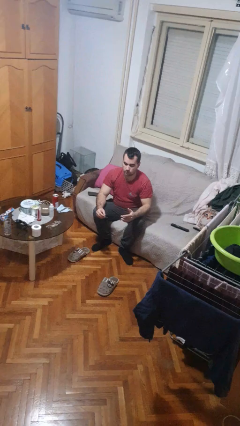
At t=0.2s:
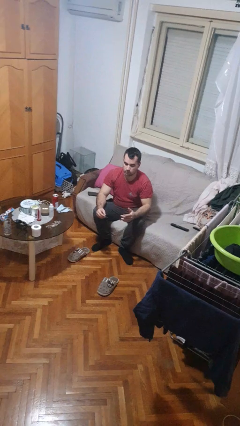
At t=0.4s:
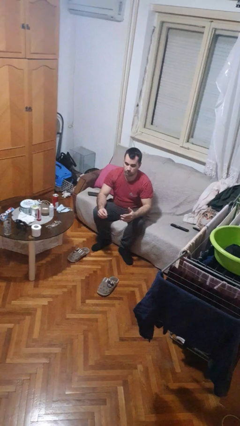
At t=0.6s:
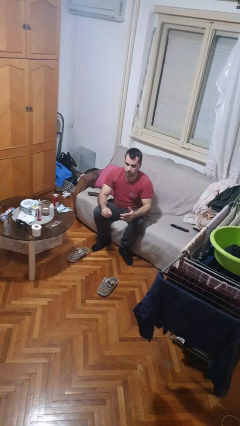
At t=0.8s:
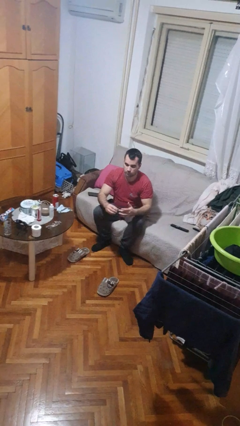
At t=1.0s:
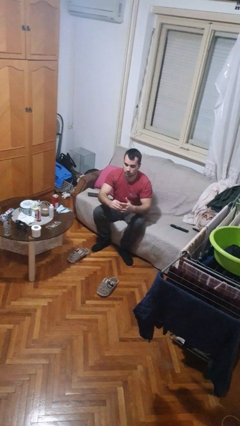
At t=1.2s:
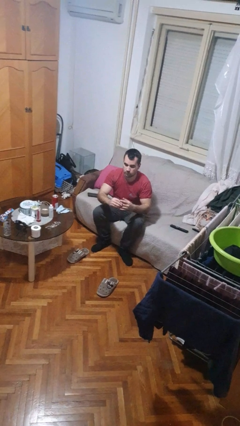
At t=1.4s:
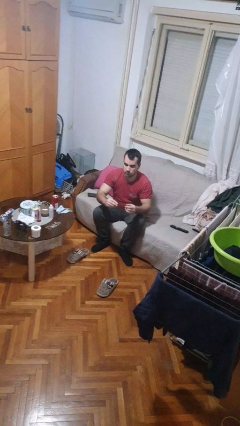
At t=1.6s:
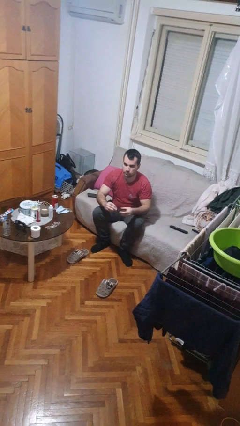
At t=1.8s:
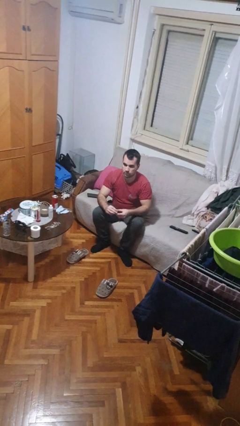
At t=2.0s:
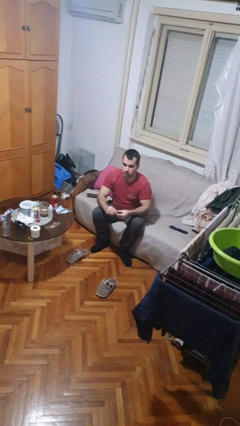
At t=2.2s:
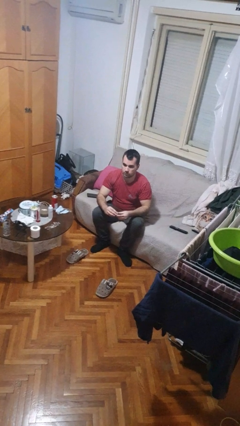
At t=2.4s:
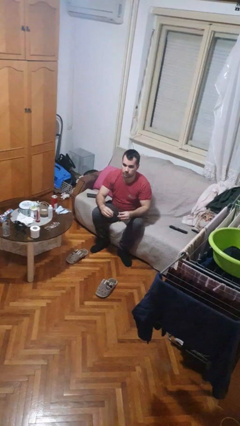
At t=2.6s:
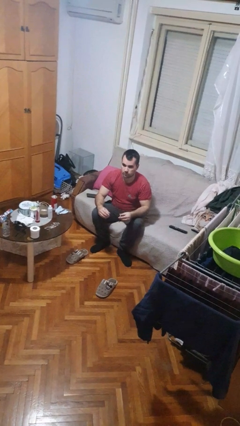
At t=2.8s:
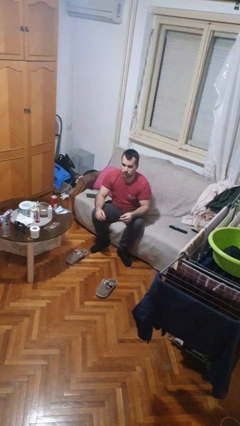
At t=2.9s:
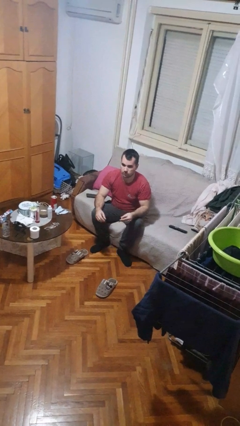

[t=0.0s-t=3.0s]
person takes off ring

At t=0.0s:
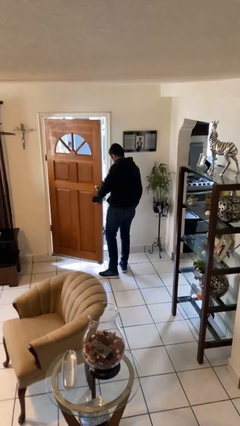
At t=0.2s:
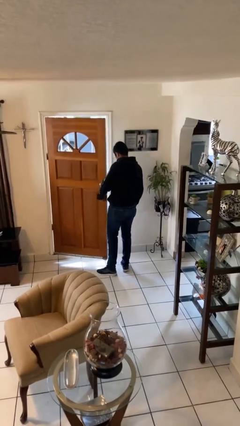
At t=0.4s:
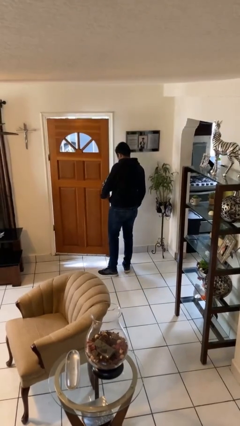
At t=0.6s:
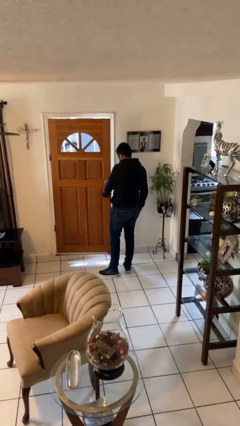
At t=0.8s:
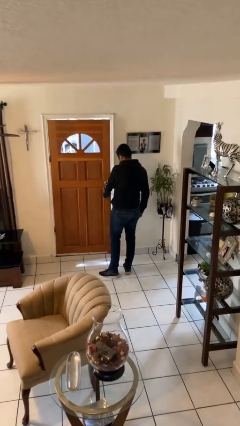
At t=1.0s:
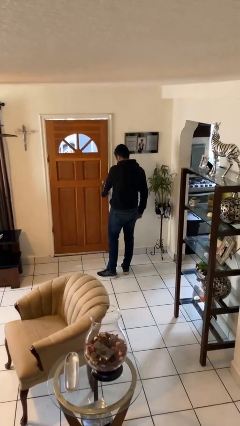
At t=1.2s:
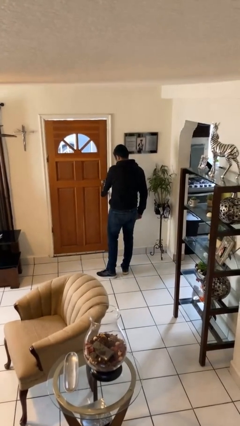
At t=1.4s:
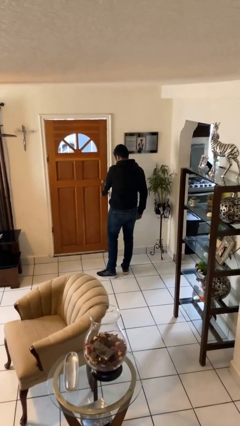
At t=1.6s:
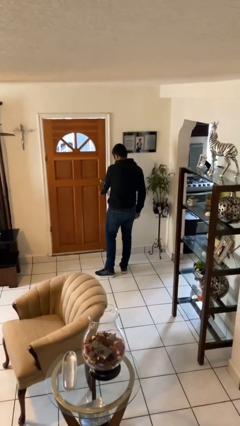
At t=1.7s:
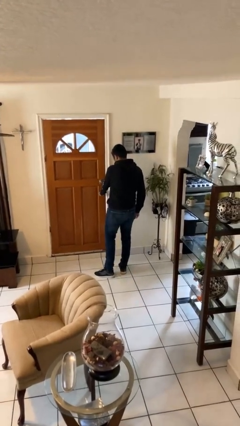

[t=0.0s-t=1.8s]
person closes facility door

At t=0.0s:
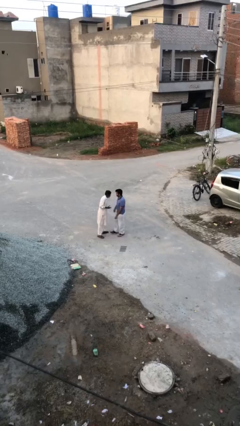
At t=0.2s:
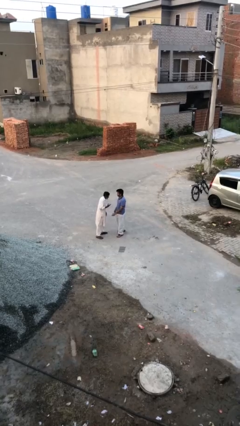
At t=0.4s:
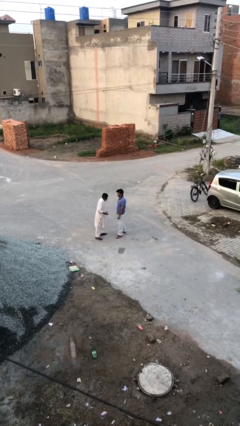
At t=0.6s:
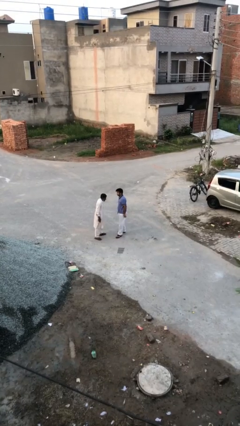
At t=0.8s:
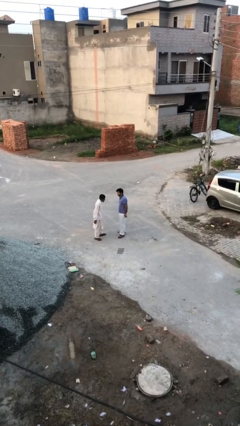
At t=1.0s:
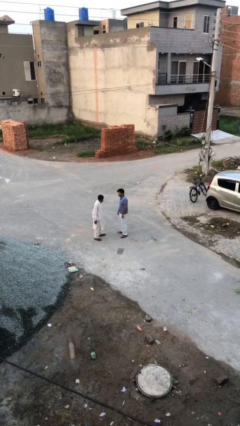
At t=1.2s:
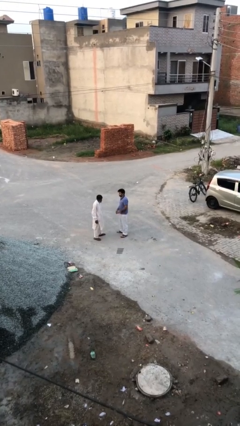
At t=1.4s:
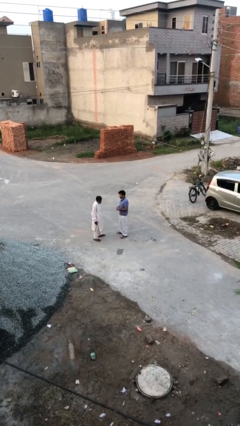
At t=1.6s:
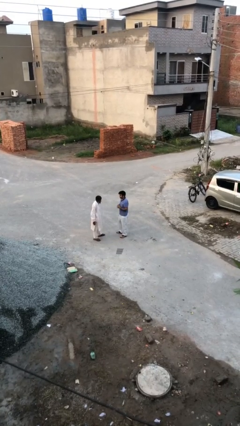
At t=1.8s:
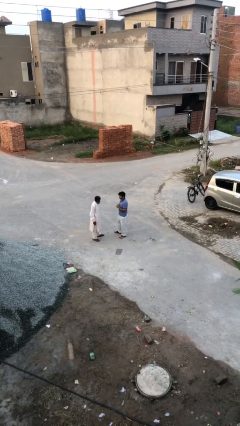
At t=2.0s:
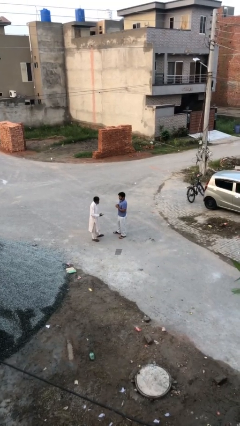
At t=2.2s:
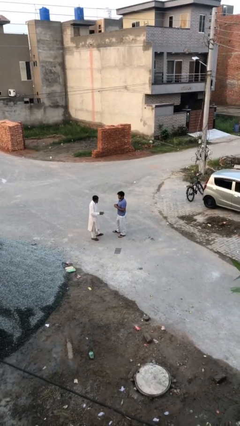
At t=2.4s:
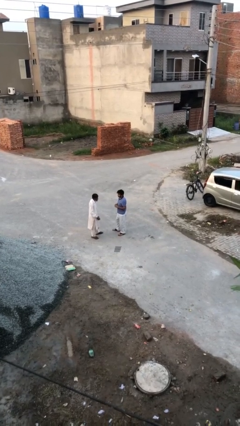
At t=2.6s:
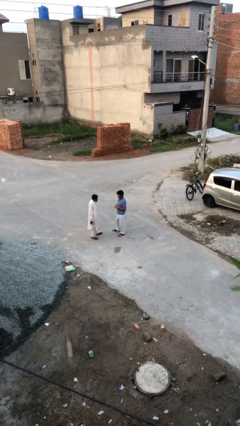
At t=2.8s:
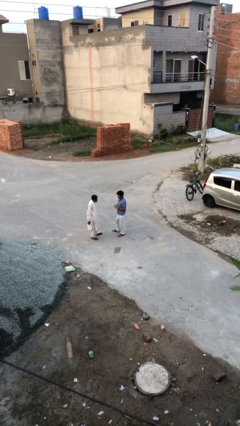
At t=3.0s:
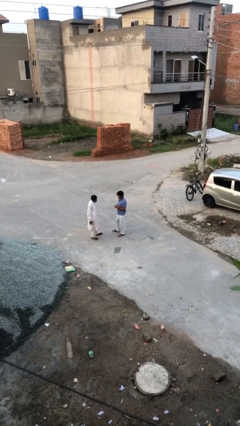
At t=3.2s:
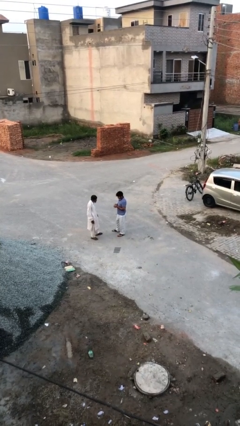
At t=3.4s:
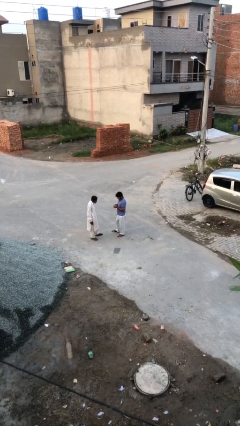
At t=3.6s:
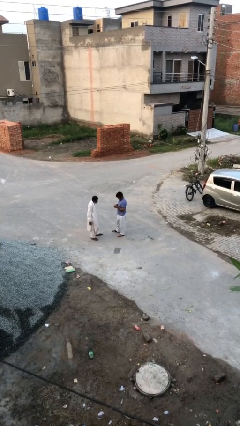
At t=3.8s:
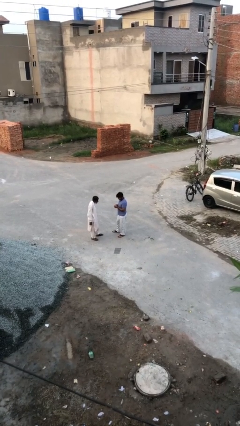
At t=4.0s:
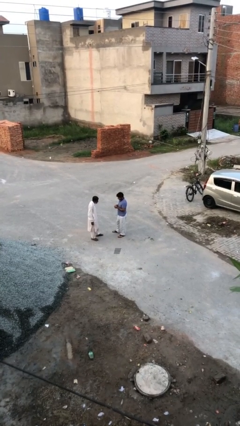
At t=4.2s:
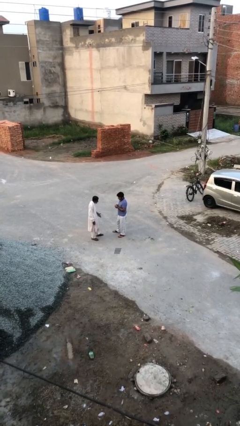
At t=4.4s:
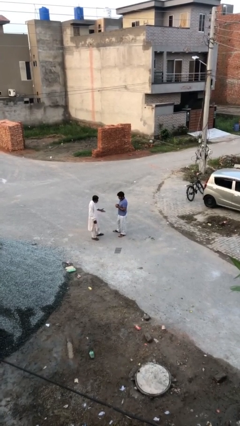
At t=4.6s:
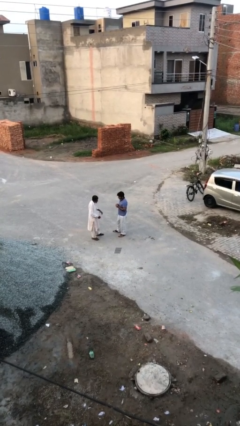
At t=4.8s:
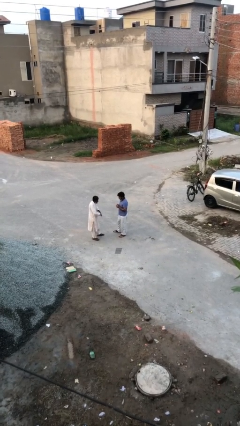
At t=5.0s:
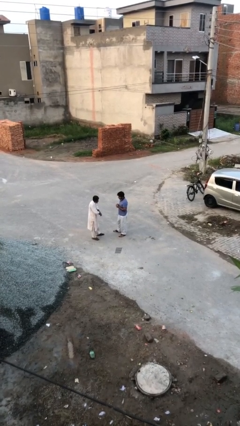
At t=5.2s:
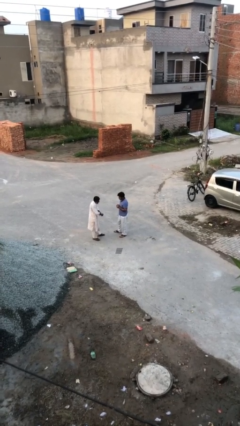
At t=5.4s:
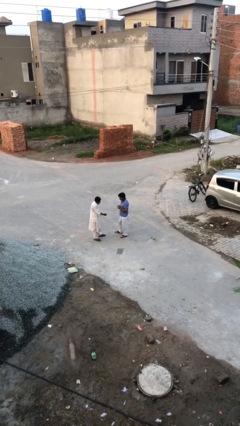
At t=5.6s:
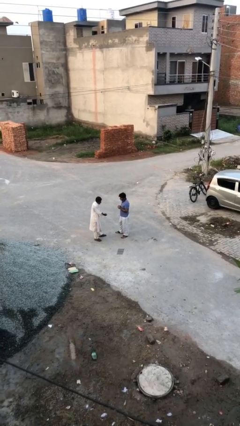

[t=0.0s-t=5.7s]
person talks to person

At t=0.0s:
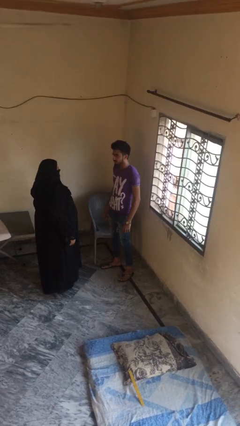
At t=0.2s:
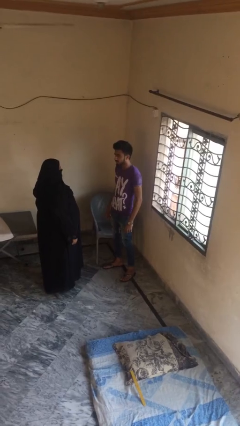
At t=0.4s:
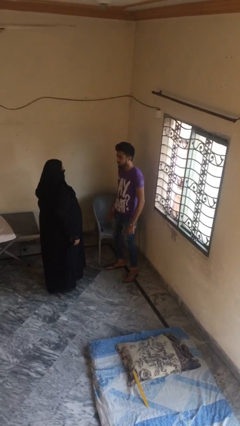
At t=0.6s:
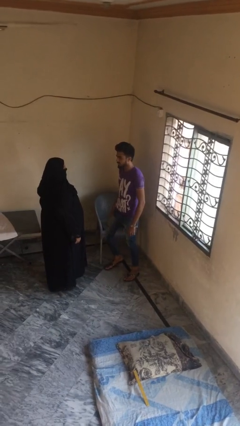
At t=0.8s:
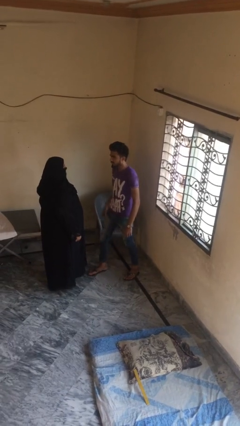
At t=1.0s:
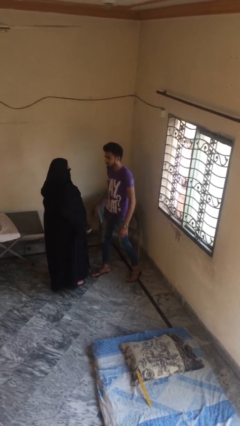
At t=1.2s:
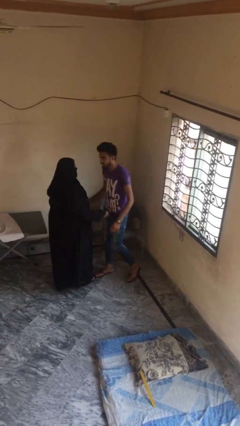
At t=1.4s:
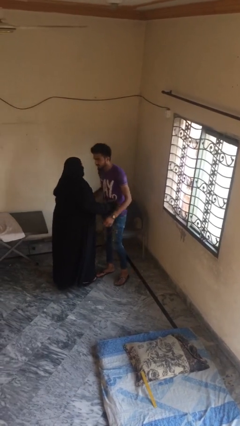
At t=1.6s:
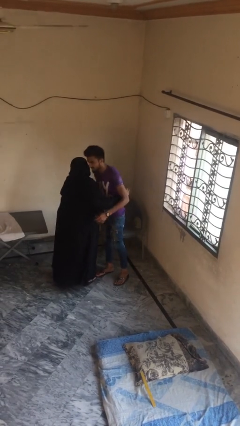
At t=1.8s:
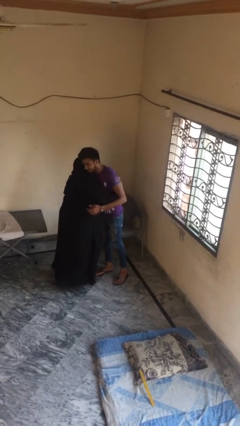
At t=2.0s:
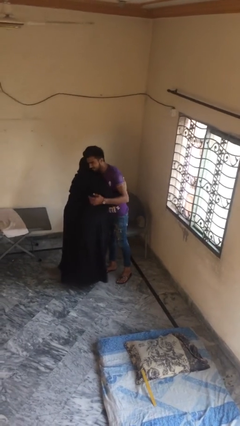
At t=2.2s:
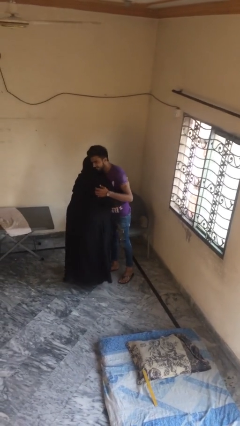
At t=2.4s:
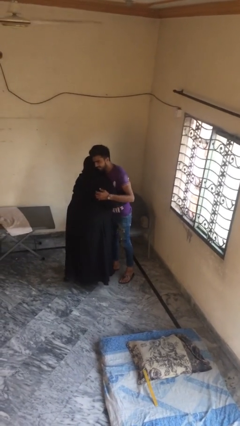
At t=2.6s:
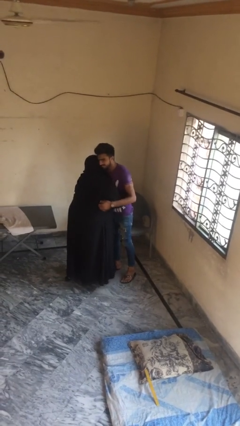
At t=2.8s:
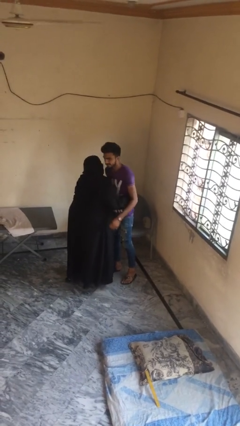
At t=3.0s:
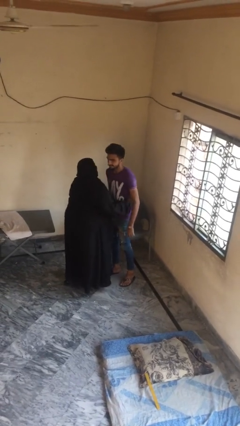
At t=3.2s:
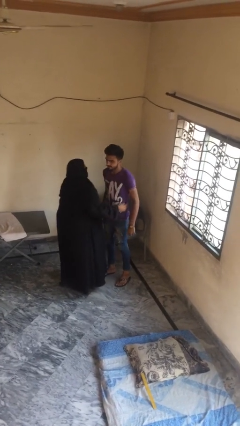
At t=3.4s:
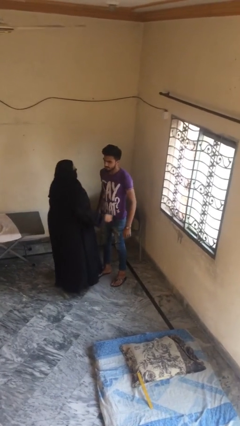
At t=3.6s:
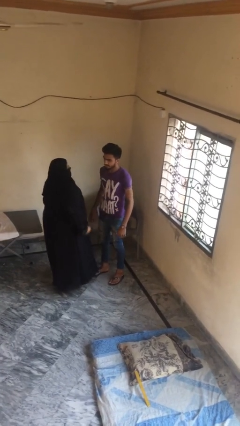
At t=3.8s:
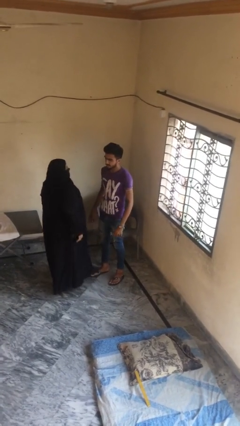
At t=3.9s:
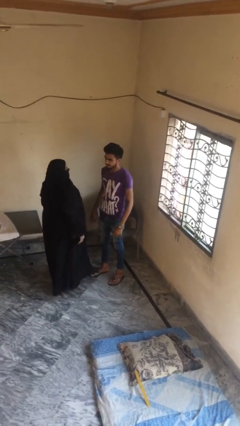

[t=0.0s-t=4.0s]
person embraces person

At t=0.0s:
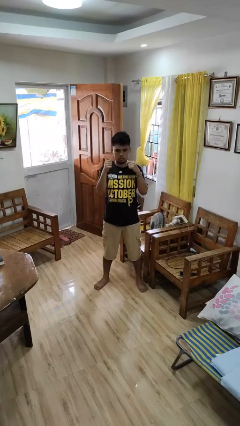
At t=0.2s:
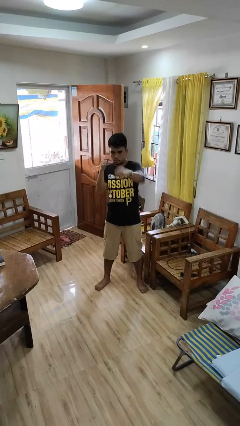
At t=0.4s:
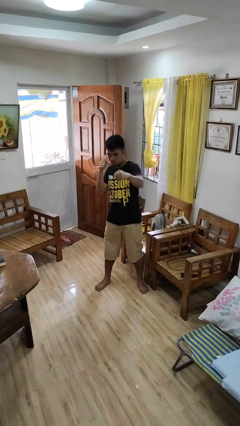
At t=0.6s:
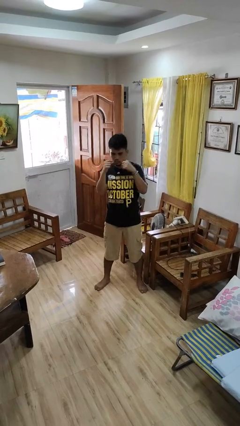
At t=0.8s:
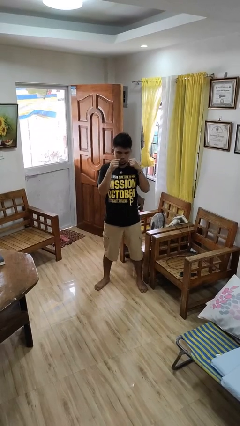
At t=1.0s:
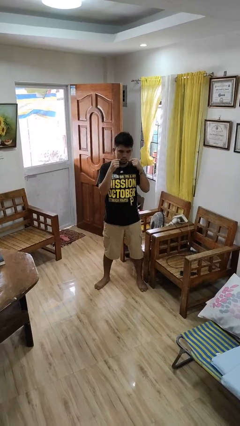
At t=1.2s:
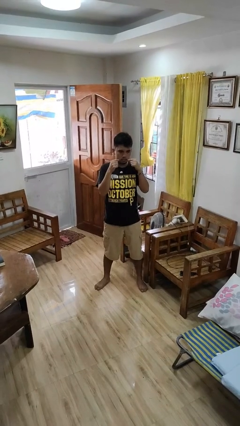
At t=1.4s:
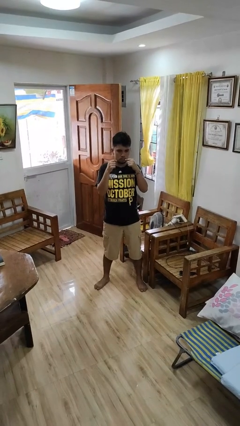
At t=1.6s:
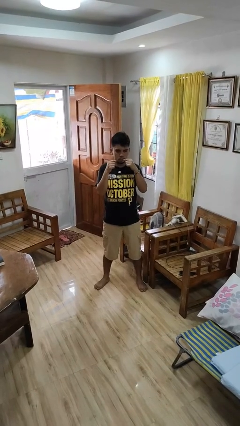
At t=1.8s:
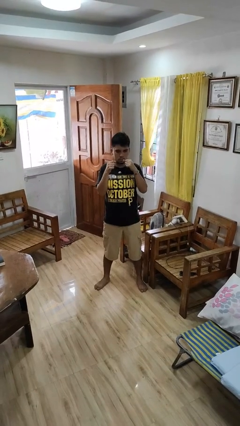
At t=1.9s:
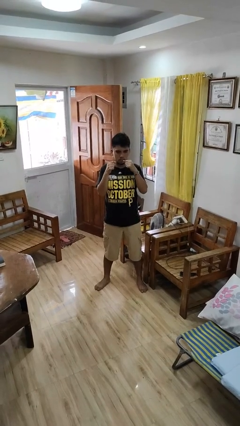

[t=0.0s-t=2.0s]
person punches

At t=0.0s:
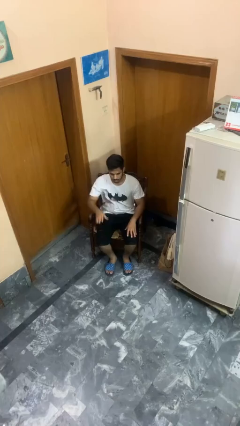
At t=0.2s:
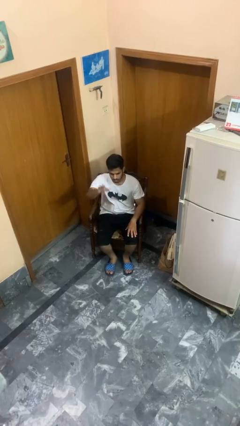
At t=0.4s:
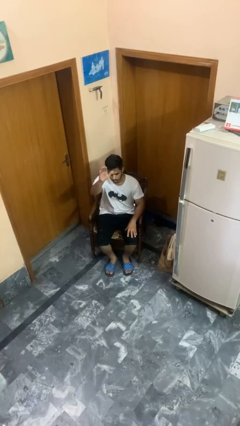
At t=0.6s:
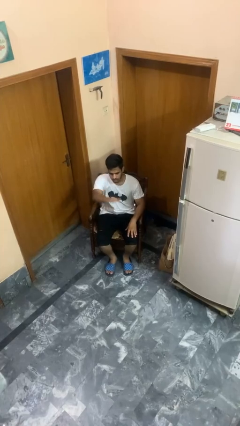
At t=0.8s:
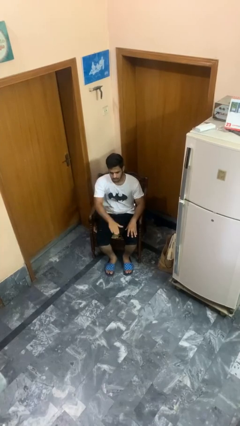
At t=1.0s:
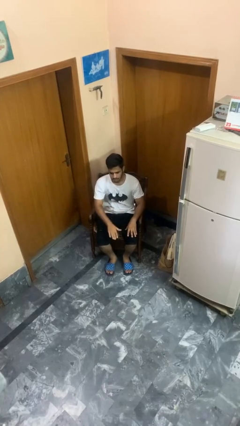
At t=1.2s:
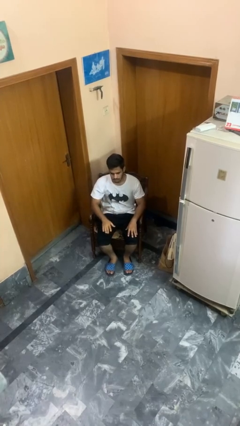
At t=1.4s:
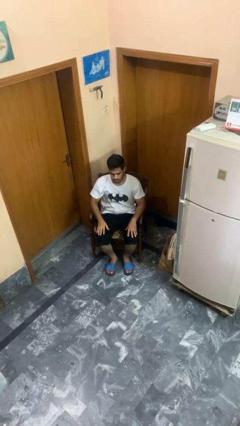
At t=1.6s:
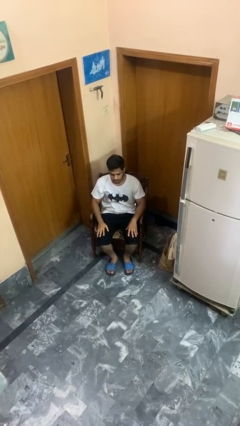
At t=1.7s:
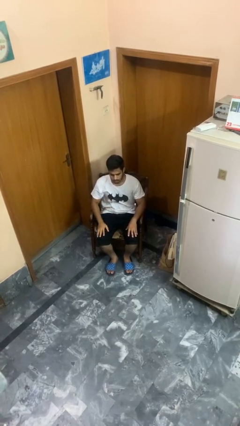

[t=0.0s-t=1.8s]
person gestures swipe down
